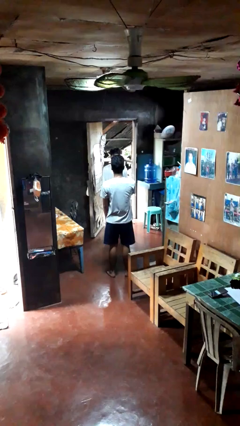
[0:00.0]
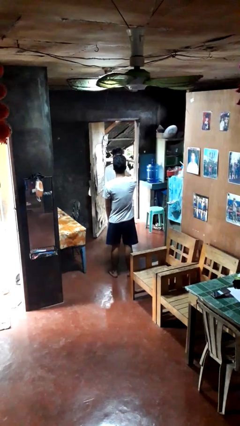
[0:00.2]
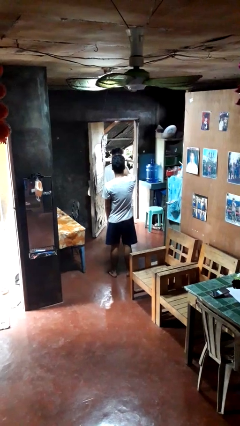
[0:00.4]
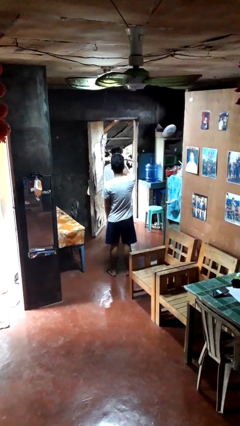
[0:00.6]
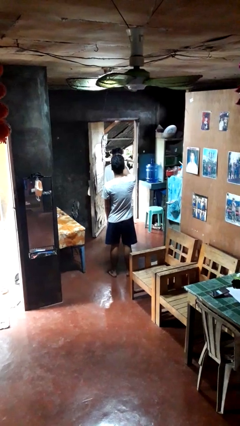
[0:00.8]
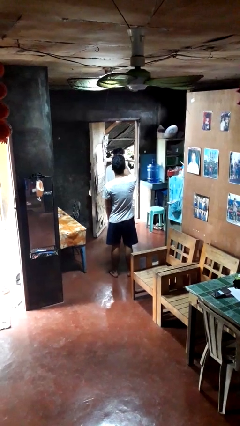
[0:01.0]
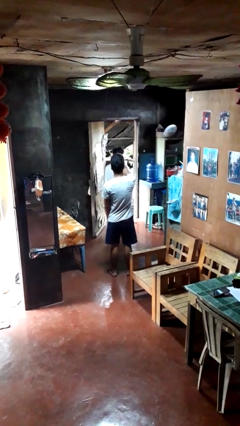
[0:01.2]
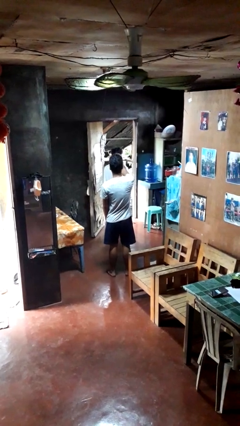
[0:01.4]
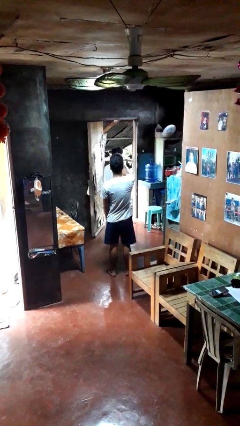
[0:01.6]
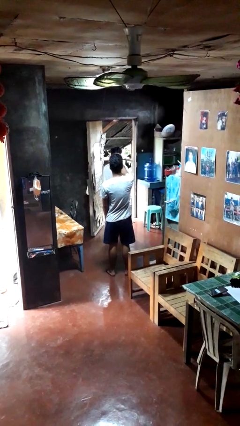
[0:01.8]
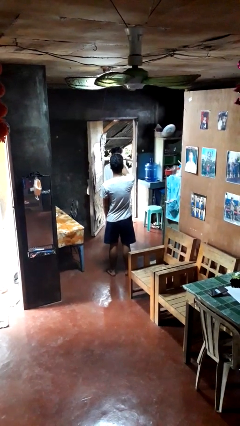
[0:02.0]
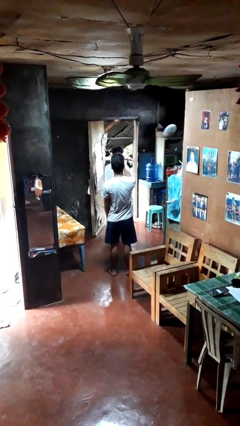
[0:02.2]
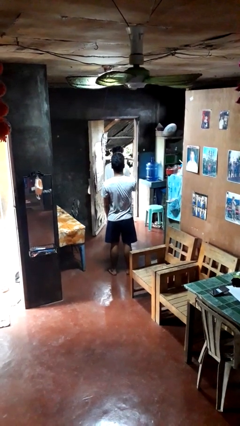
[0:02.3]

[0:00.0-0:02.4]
person points at person

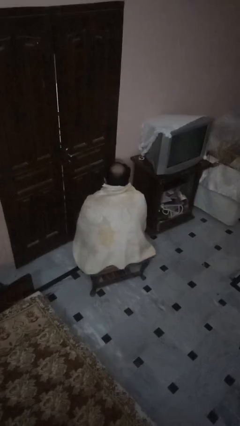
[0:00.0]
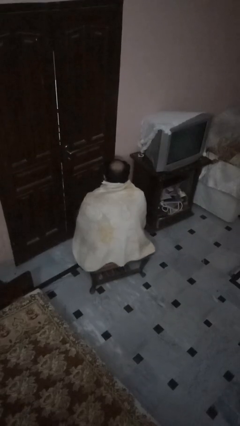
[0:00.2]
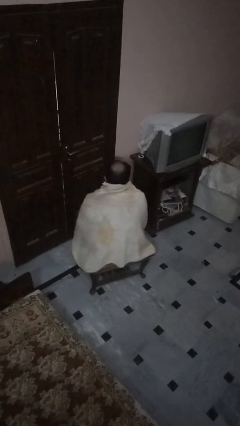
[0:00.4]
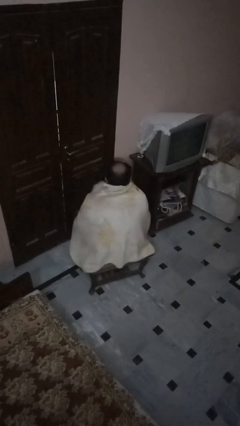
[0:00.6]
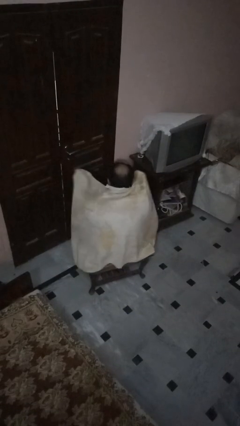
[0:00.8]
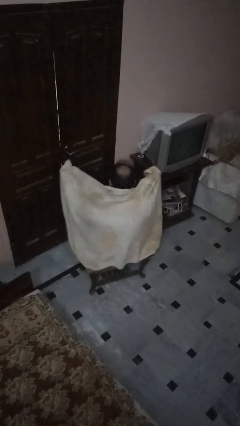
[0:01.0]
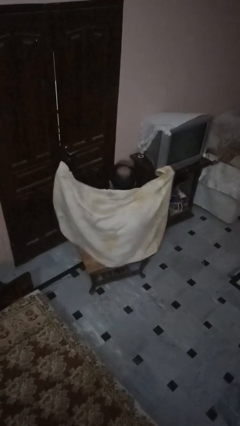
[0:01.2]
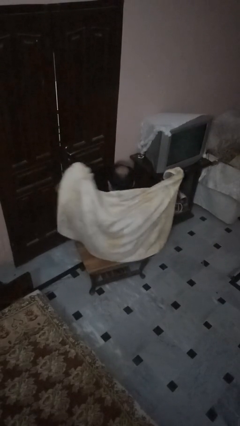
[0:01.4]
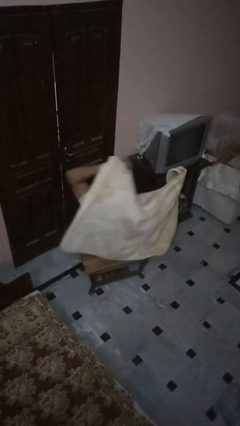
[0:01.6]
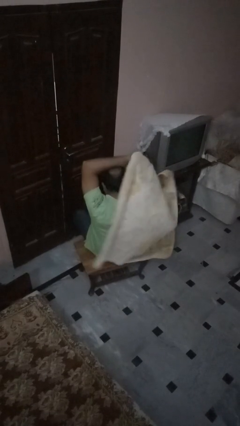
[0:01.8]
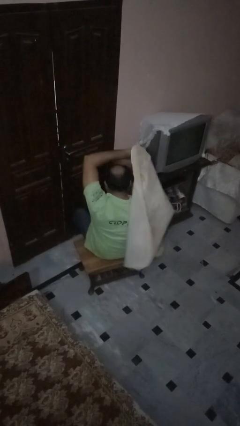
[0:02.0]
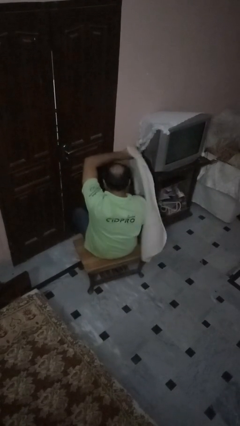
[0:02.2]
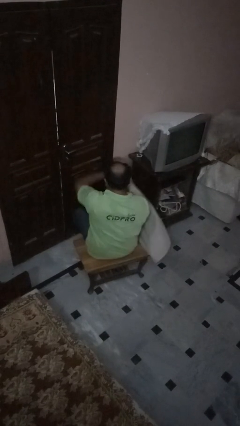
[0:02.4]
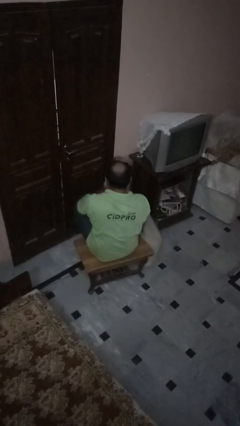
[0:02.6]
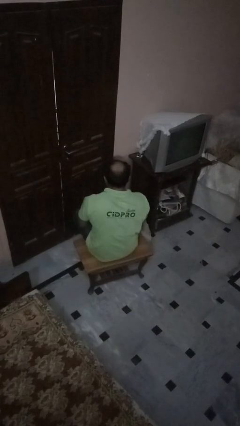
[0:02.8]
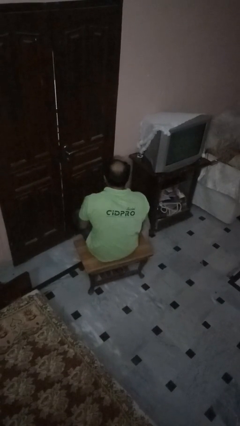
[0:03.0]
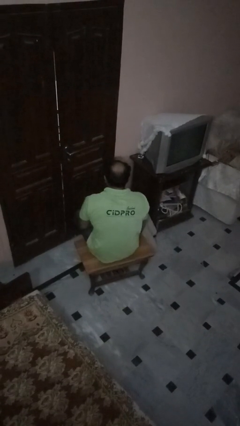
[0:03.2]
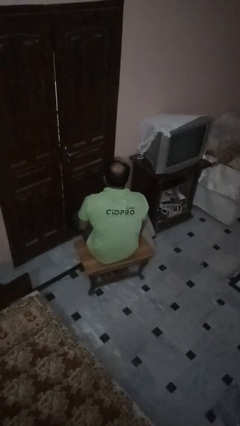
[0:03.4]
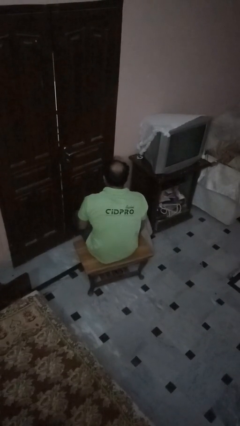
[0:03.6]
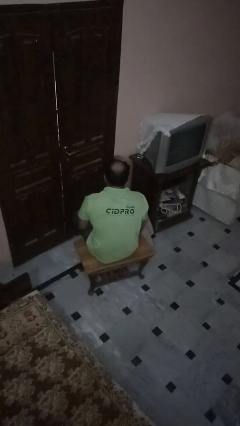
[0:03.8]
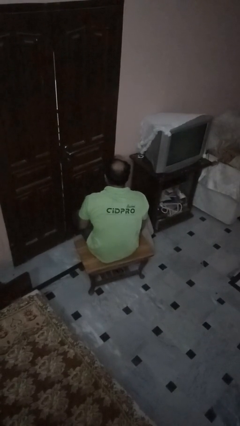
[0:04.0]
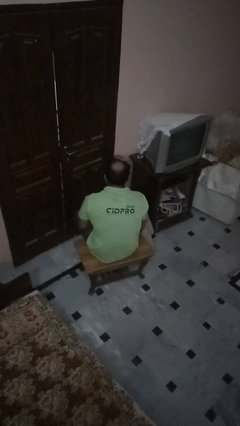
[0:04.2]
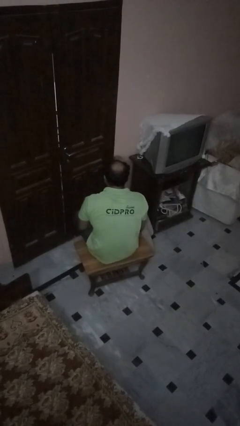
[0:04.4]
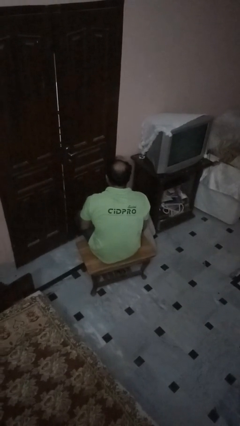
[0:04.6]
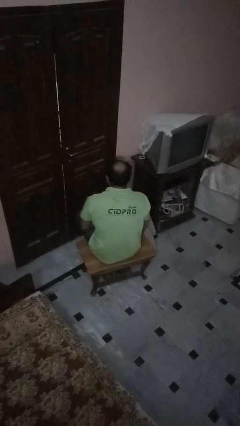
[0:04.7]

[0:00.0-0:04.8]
person uncovers with blanket

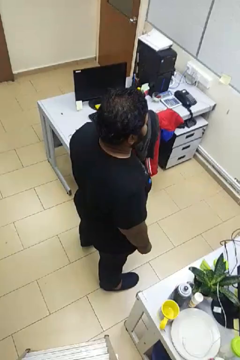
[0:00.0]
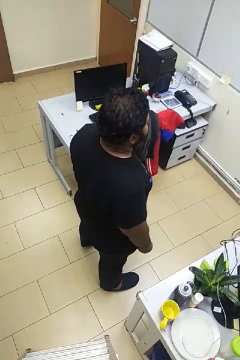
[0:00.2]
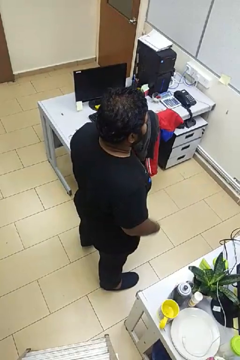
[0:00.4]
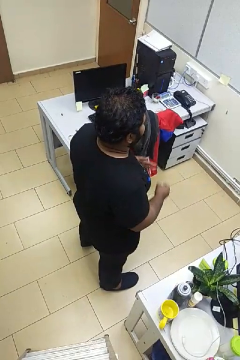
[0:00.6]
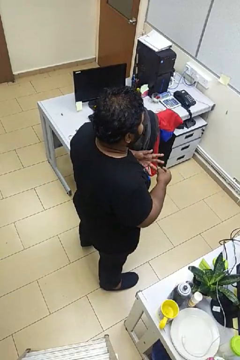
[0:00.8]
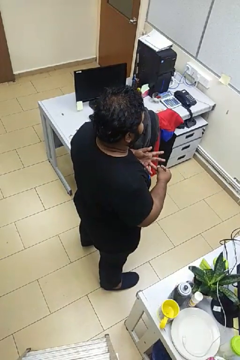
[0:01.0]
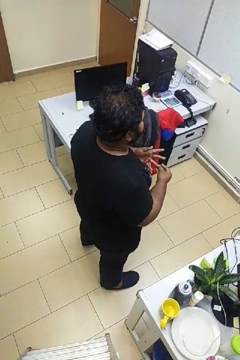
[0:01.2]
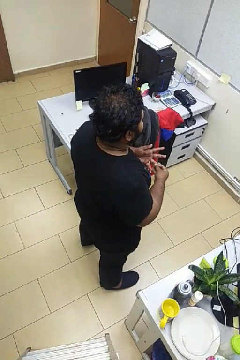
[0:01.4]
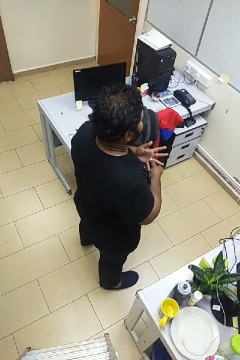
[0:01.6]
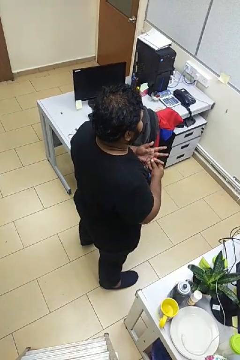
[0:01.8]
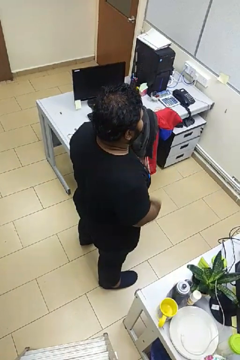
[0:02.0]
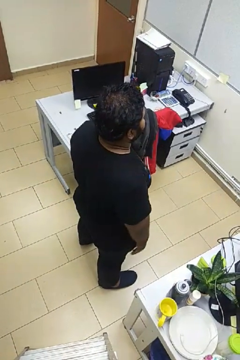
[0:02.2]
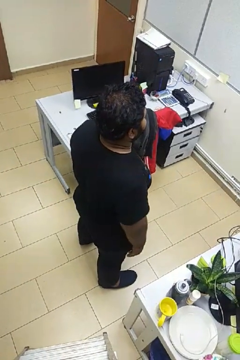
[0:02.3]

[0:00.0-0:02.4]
person puts on ring

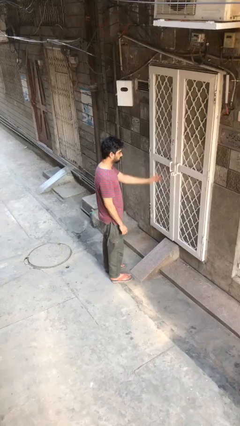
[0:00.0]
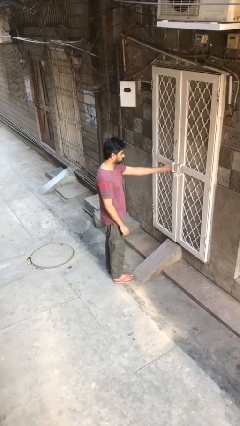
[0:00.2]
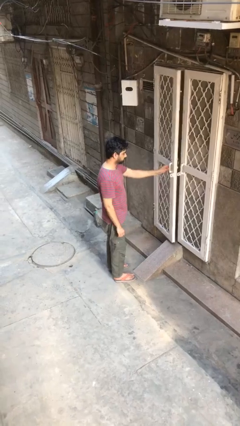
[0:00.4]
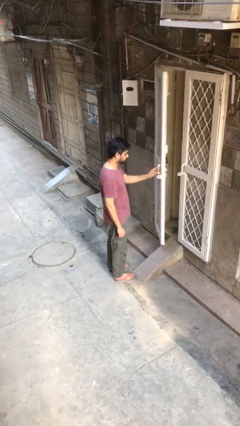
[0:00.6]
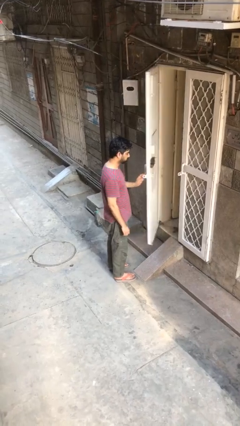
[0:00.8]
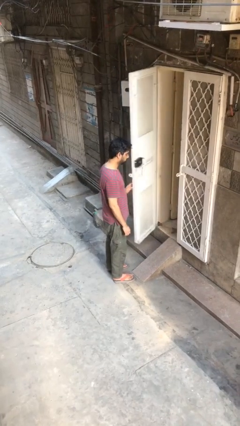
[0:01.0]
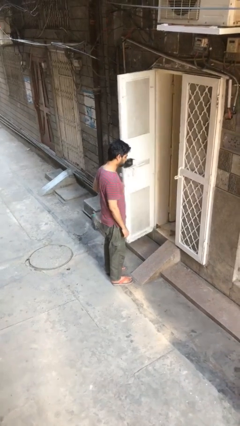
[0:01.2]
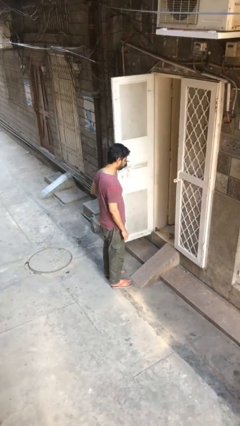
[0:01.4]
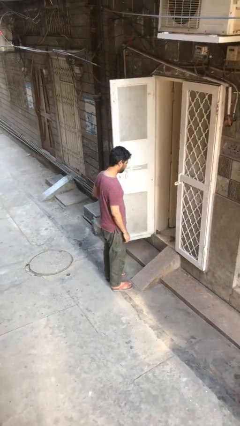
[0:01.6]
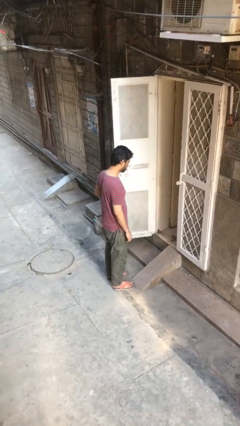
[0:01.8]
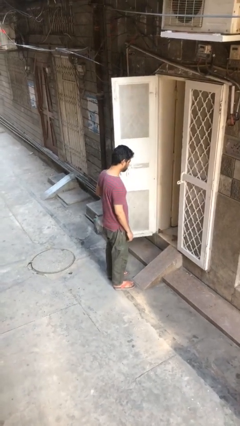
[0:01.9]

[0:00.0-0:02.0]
person opens facility door

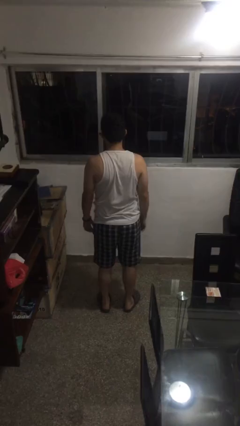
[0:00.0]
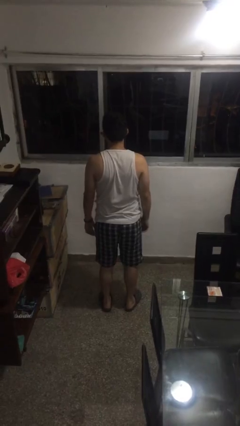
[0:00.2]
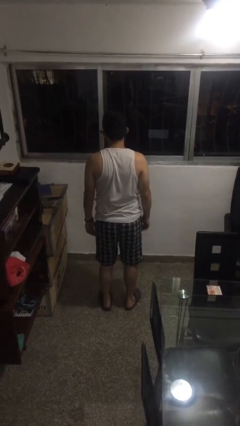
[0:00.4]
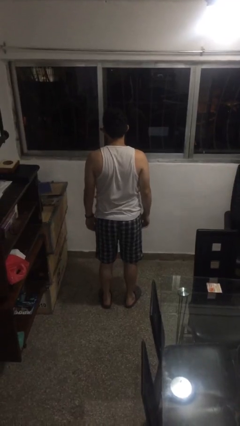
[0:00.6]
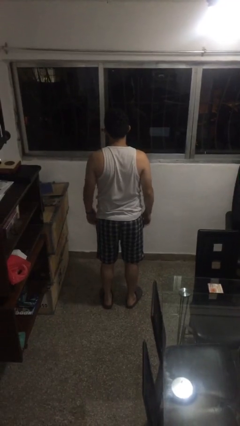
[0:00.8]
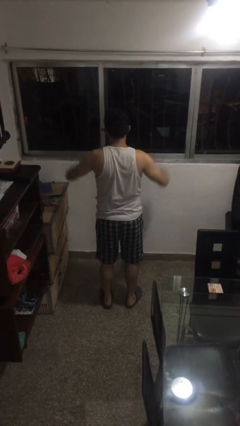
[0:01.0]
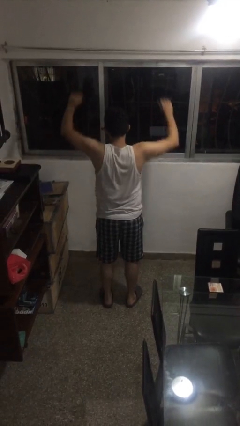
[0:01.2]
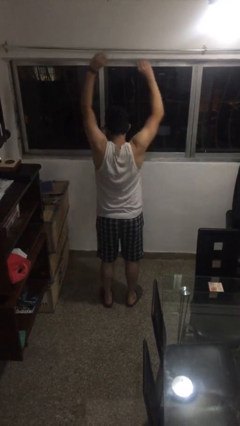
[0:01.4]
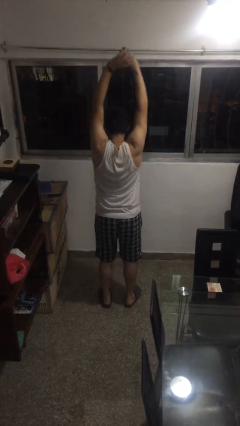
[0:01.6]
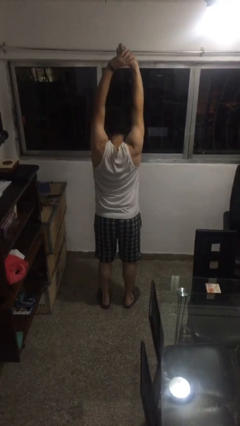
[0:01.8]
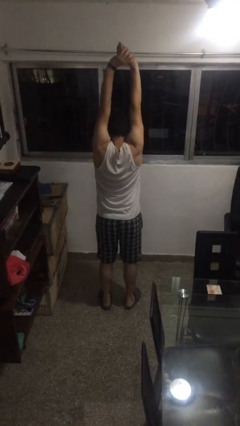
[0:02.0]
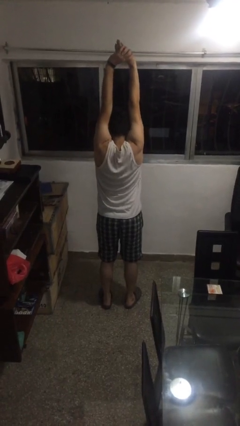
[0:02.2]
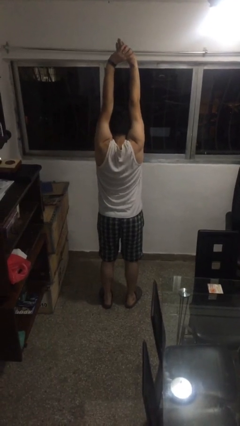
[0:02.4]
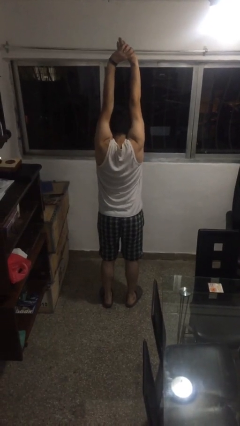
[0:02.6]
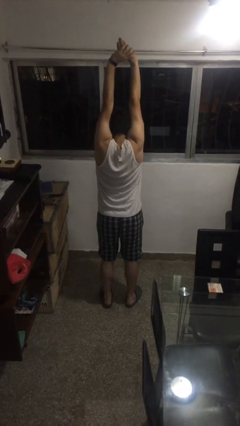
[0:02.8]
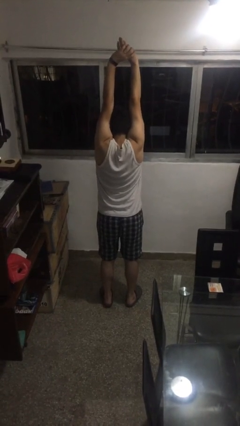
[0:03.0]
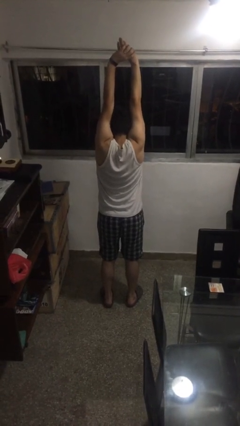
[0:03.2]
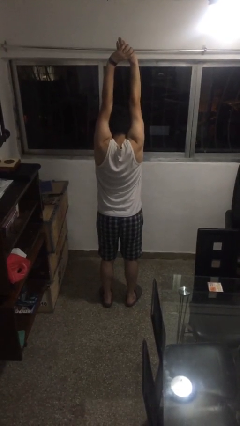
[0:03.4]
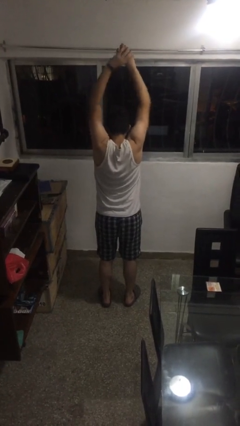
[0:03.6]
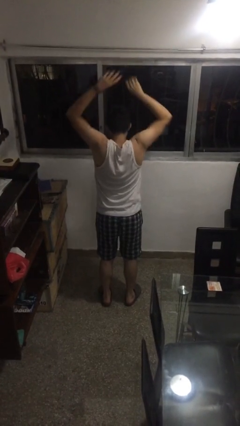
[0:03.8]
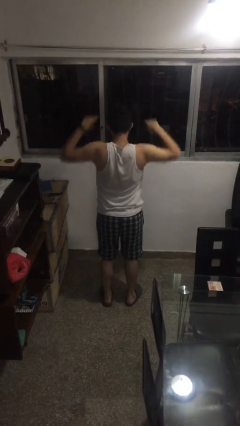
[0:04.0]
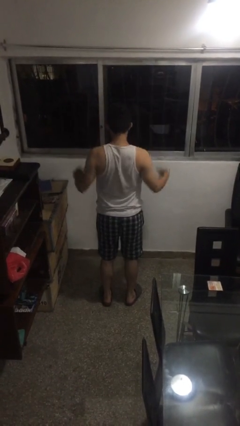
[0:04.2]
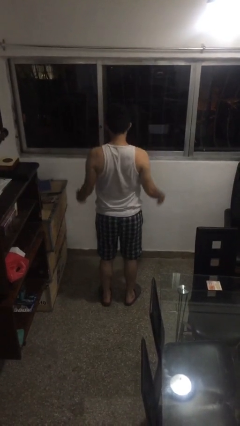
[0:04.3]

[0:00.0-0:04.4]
person stretches arms over head

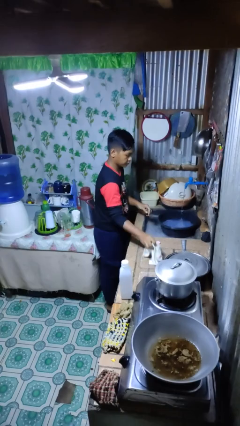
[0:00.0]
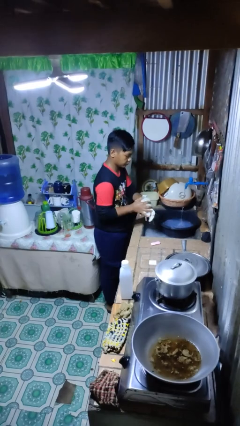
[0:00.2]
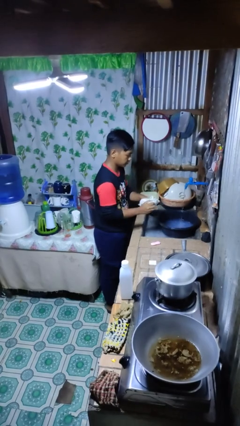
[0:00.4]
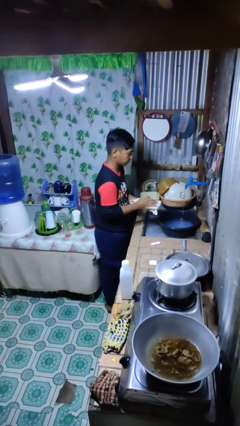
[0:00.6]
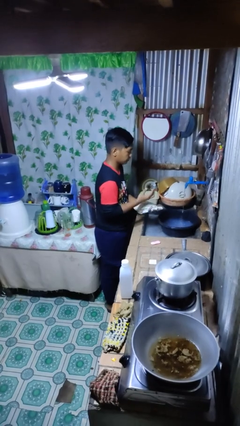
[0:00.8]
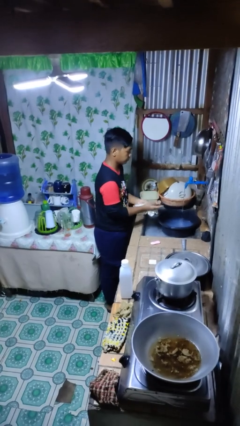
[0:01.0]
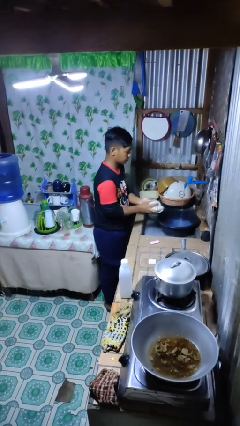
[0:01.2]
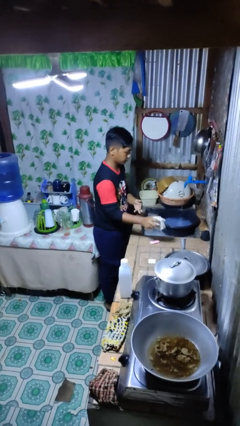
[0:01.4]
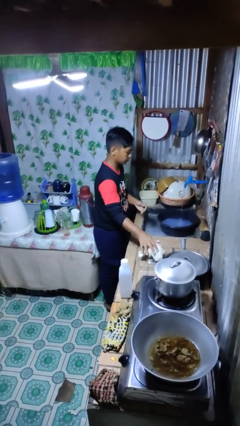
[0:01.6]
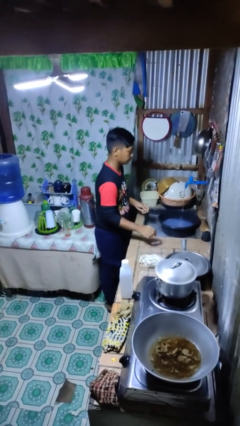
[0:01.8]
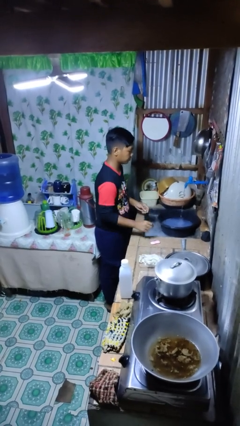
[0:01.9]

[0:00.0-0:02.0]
person dries hands with towel

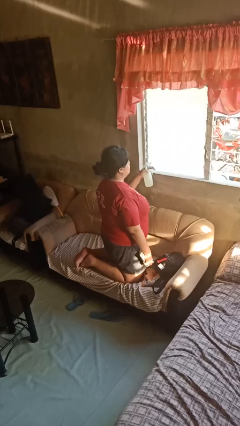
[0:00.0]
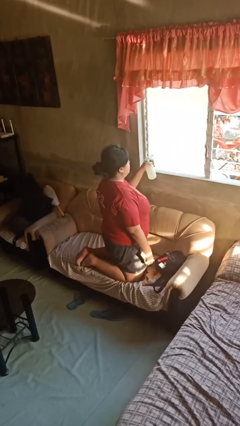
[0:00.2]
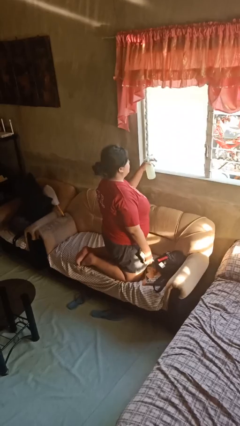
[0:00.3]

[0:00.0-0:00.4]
person sprays from bottle
